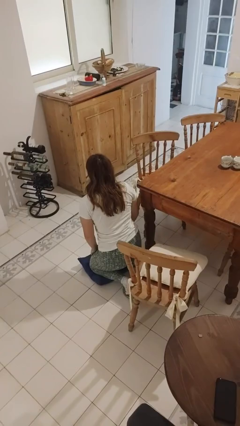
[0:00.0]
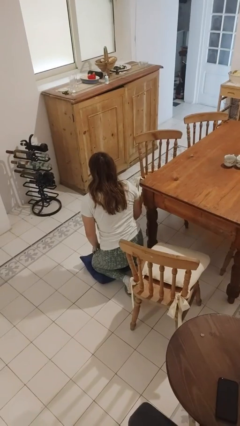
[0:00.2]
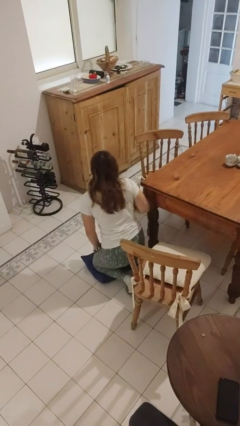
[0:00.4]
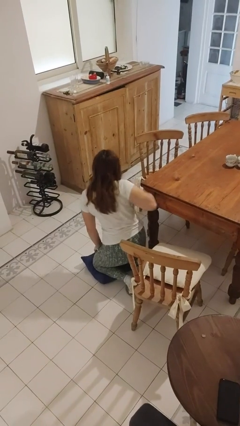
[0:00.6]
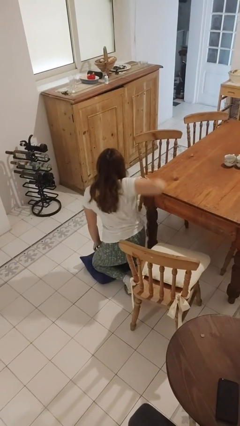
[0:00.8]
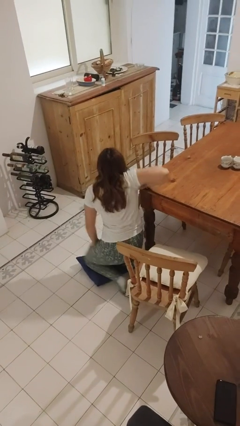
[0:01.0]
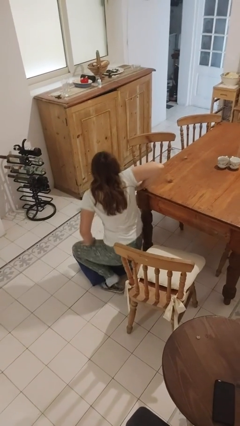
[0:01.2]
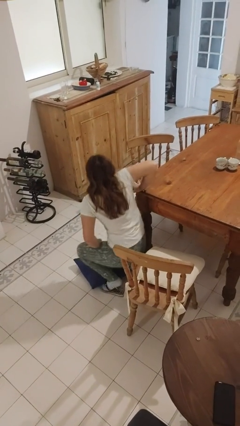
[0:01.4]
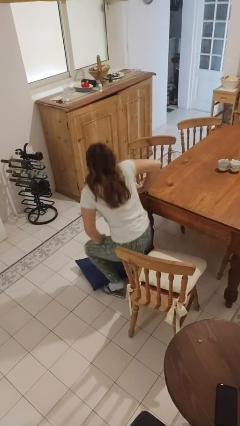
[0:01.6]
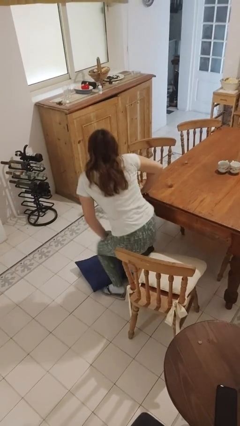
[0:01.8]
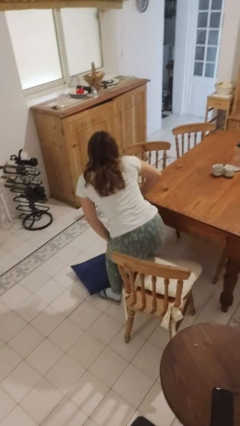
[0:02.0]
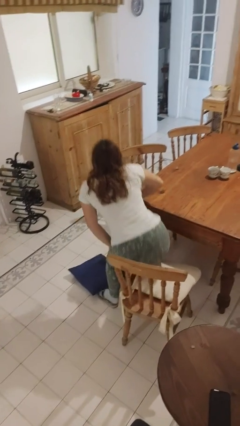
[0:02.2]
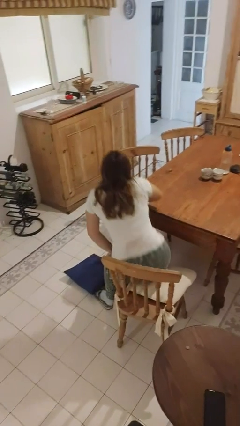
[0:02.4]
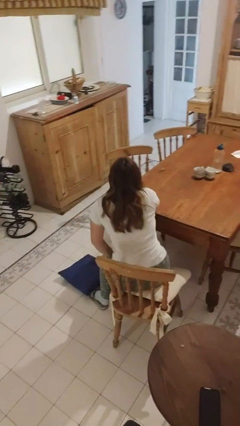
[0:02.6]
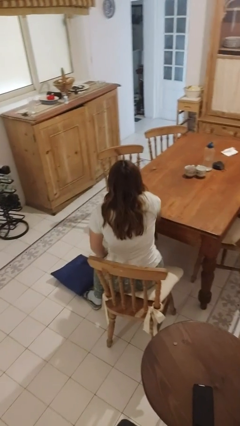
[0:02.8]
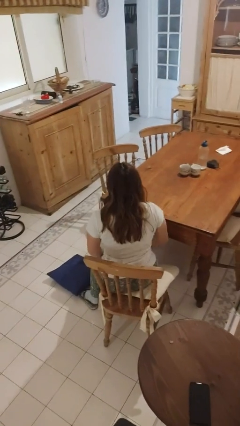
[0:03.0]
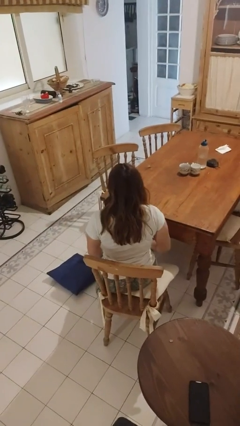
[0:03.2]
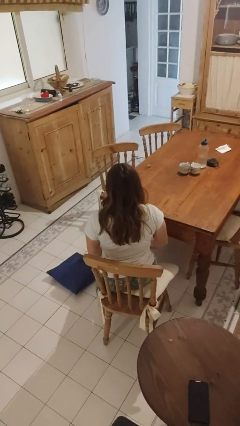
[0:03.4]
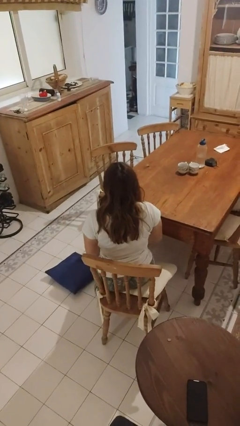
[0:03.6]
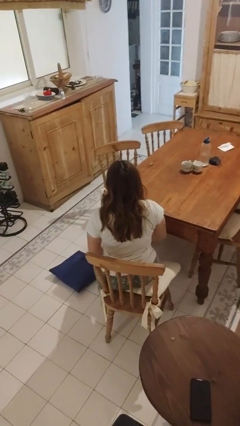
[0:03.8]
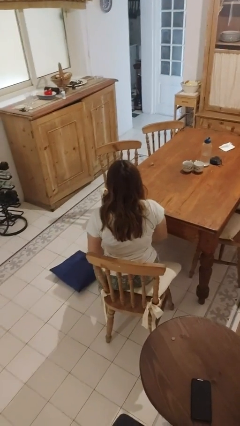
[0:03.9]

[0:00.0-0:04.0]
person sits down

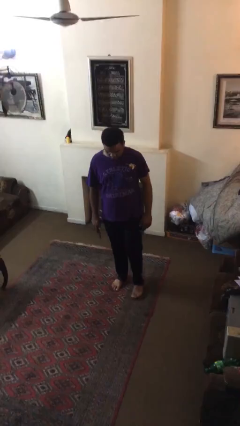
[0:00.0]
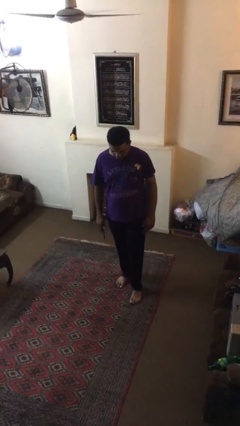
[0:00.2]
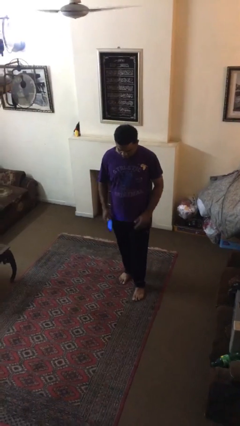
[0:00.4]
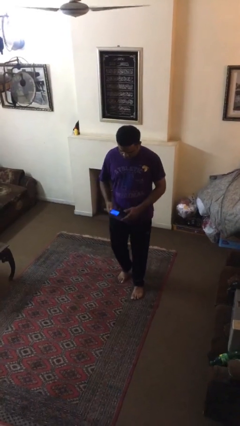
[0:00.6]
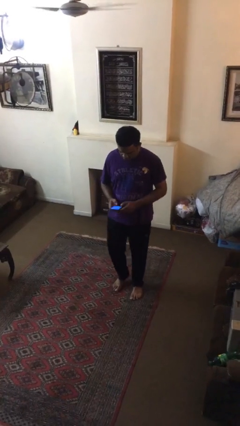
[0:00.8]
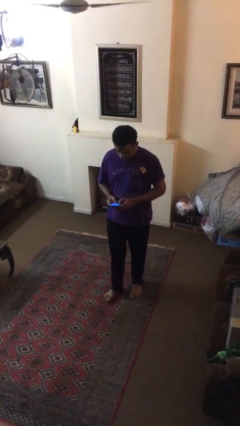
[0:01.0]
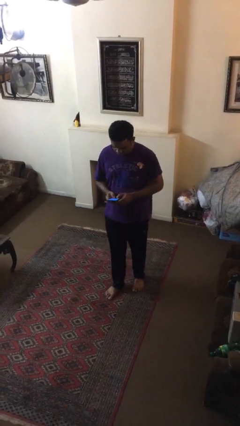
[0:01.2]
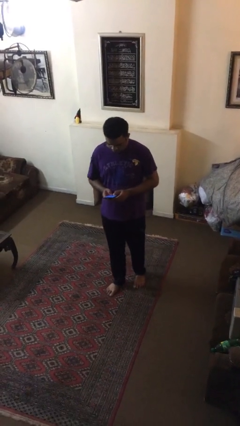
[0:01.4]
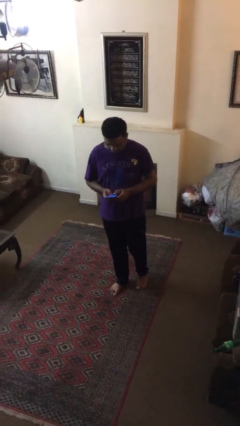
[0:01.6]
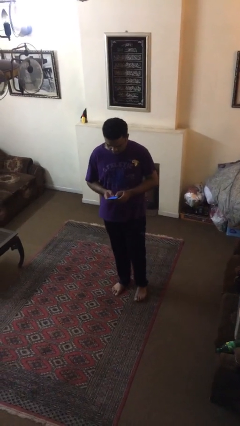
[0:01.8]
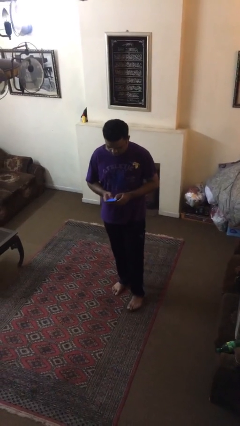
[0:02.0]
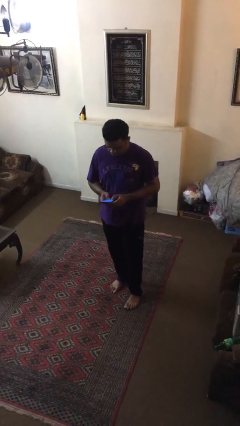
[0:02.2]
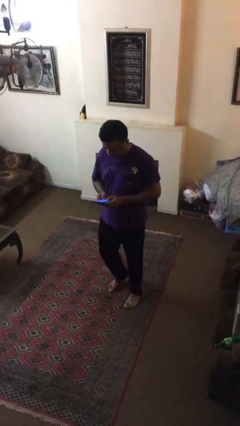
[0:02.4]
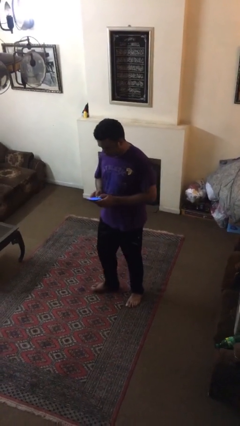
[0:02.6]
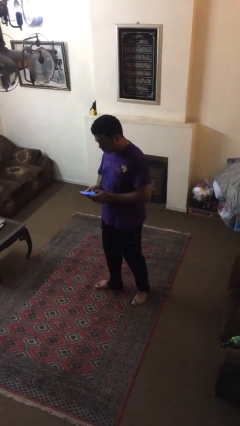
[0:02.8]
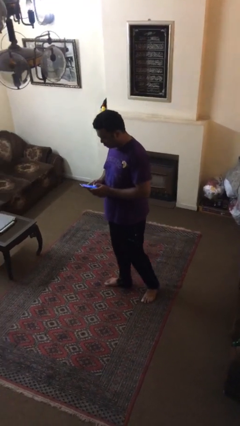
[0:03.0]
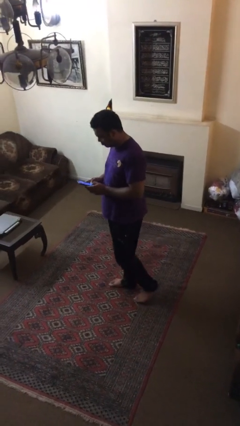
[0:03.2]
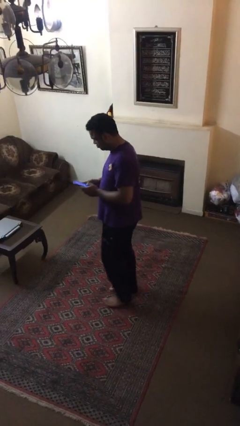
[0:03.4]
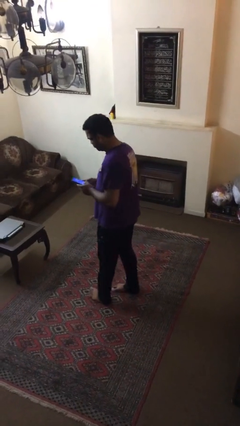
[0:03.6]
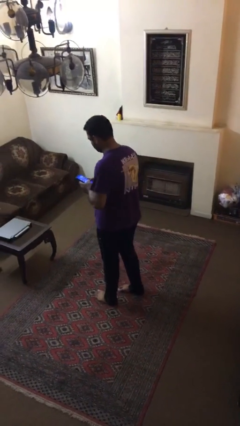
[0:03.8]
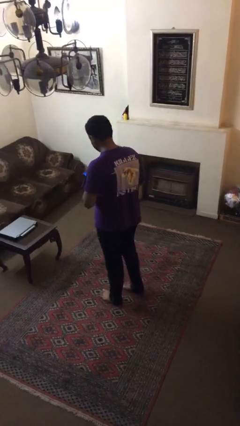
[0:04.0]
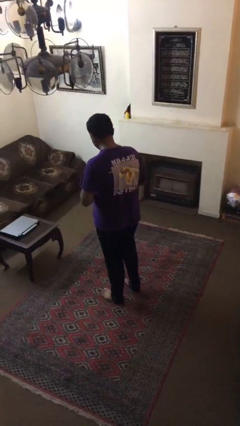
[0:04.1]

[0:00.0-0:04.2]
person texts on phone

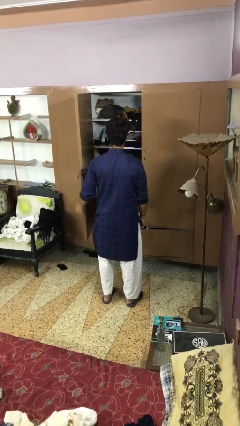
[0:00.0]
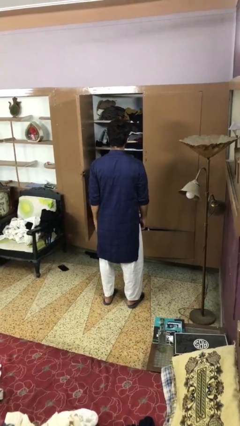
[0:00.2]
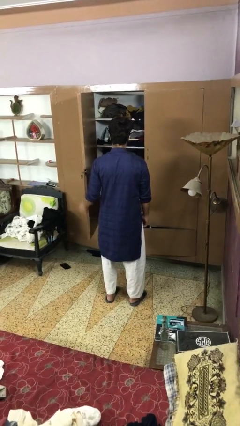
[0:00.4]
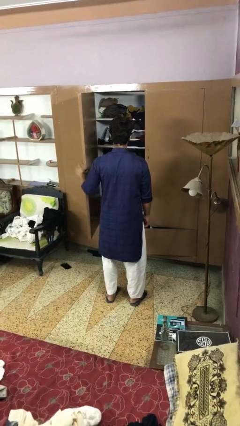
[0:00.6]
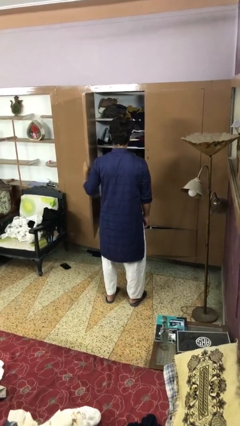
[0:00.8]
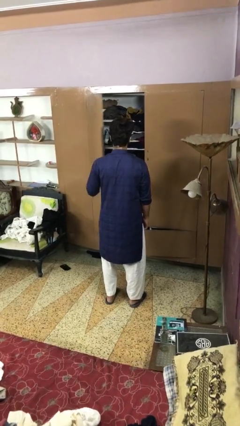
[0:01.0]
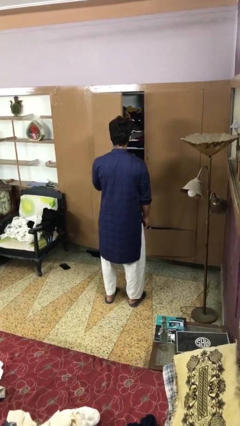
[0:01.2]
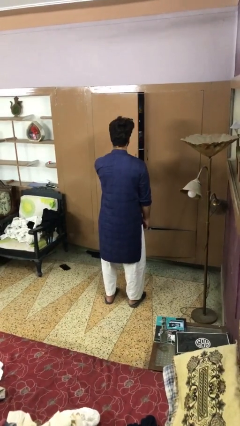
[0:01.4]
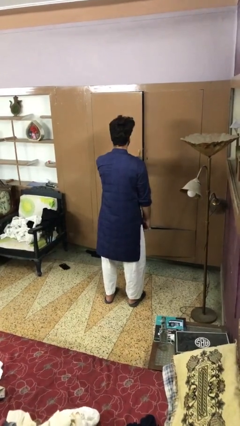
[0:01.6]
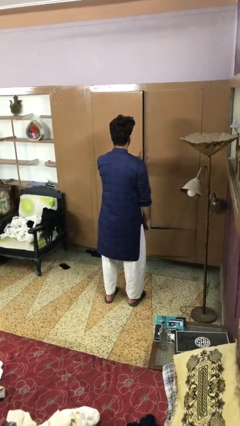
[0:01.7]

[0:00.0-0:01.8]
person closes closet door

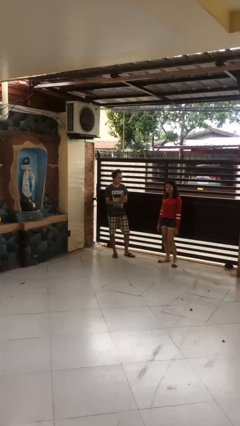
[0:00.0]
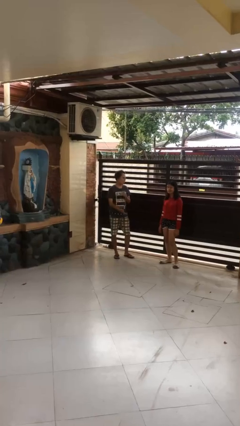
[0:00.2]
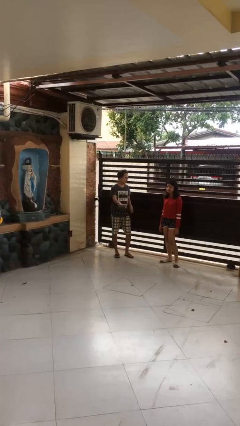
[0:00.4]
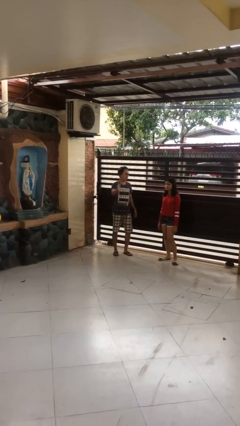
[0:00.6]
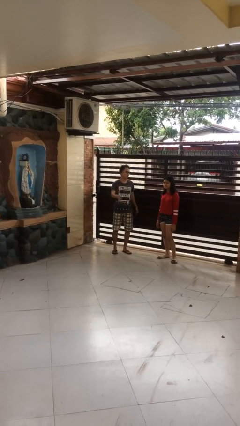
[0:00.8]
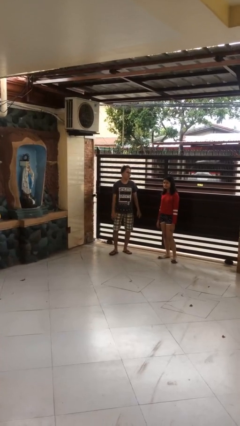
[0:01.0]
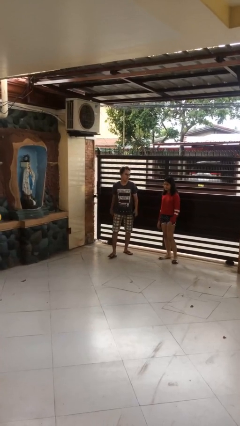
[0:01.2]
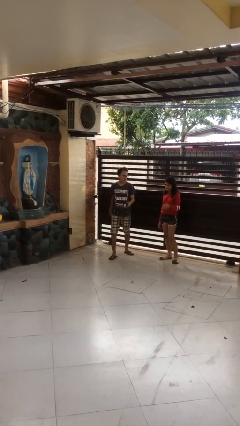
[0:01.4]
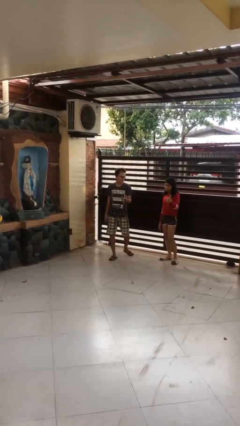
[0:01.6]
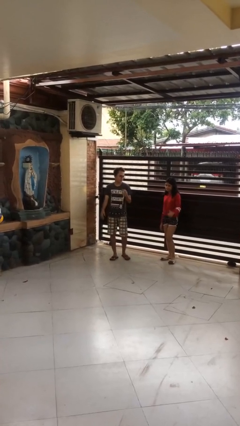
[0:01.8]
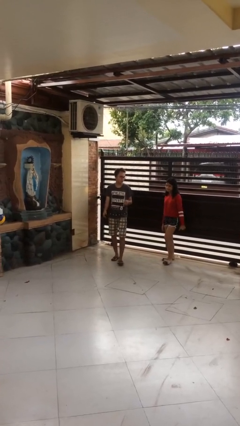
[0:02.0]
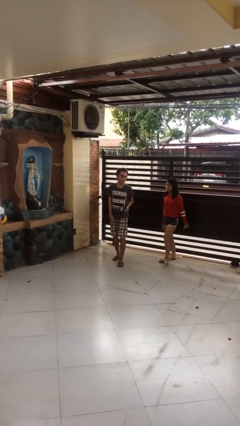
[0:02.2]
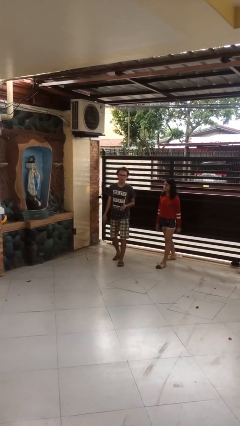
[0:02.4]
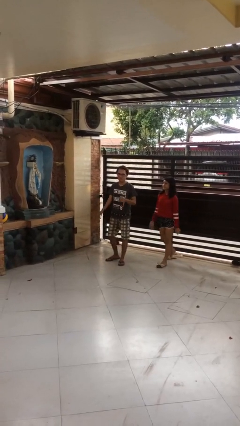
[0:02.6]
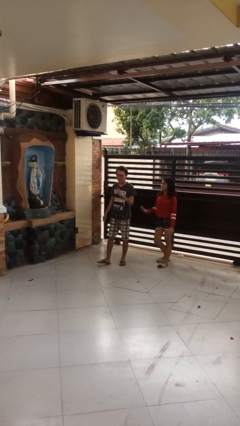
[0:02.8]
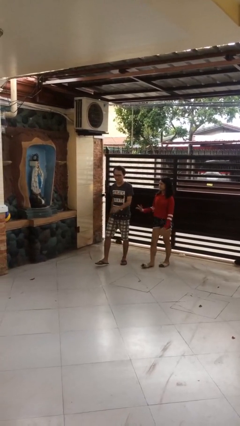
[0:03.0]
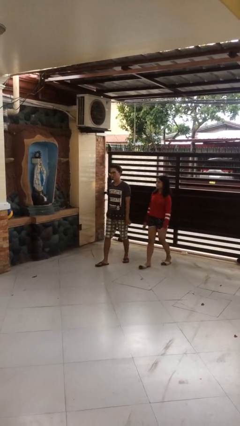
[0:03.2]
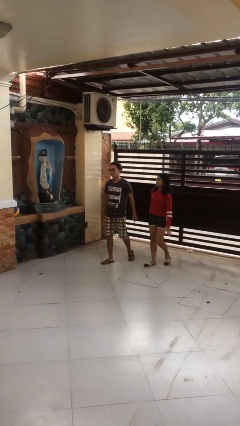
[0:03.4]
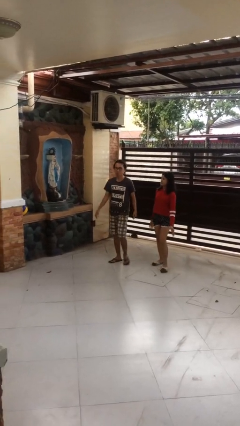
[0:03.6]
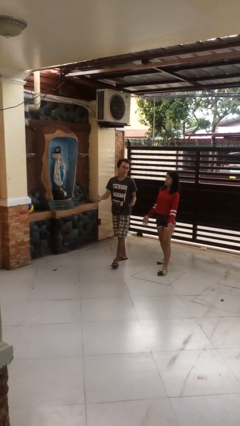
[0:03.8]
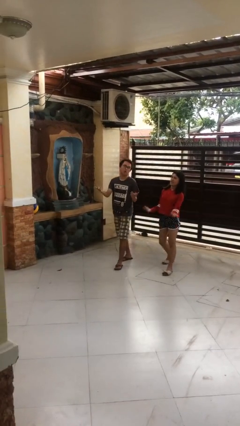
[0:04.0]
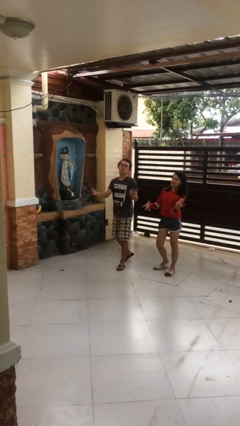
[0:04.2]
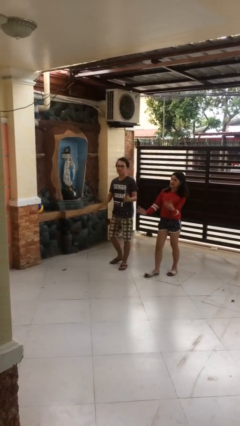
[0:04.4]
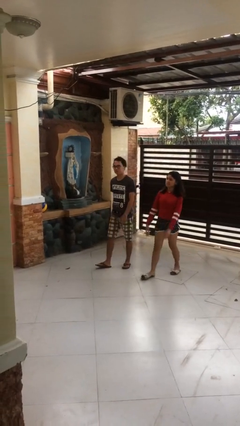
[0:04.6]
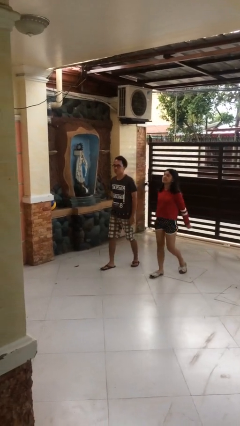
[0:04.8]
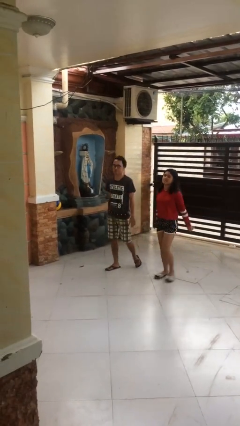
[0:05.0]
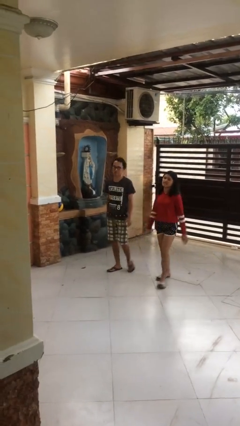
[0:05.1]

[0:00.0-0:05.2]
person talks to person

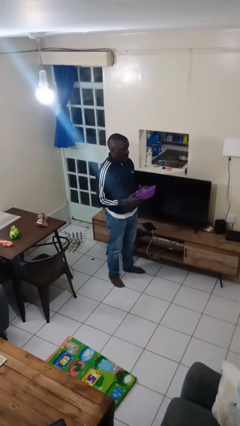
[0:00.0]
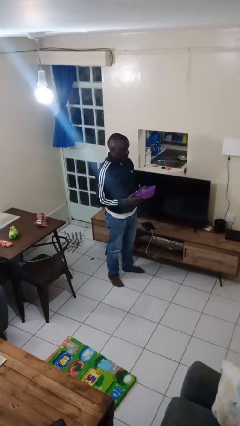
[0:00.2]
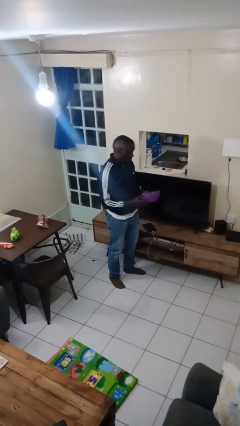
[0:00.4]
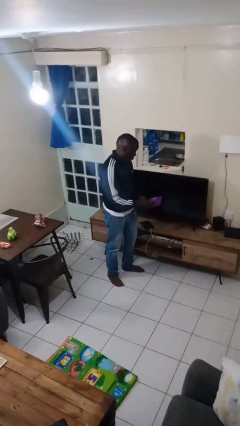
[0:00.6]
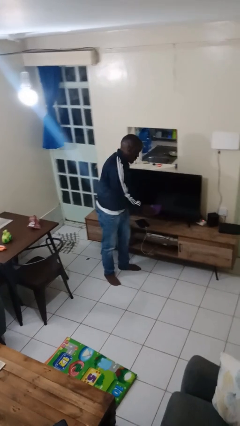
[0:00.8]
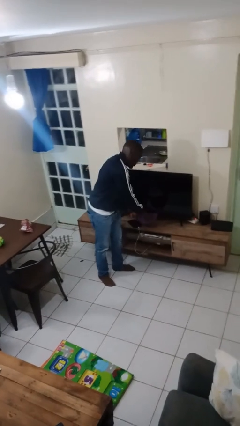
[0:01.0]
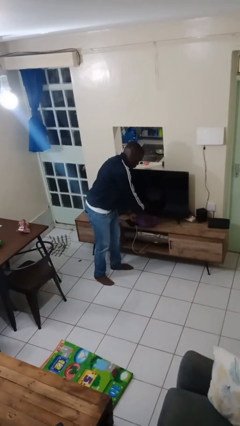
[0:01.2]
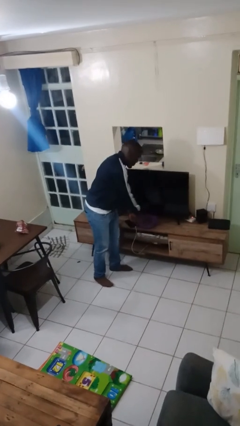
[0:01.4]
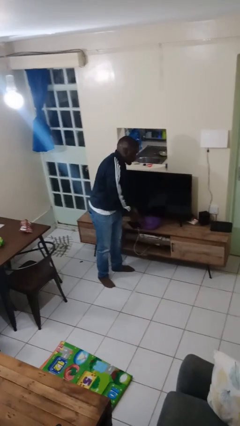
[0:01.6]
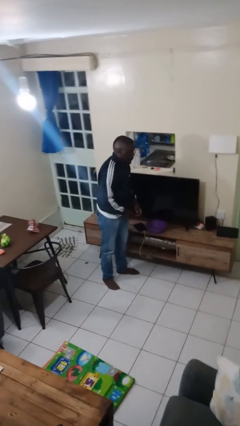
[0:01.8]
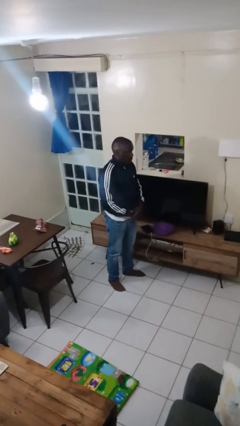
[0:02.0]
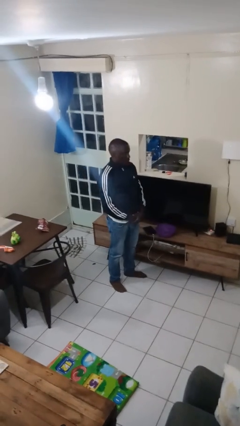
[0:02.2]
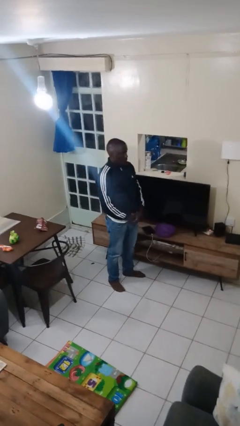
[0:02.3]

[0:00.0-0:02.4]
person puts down object on countertop
